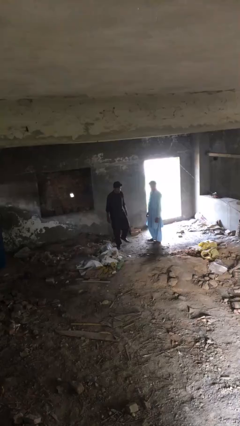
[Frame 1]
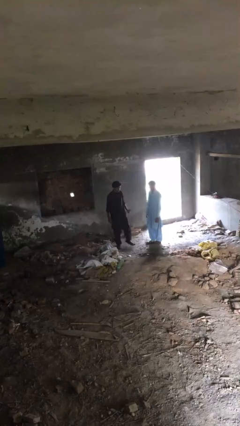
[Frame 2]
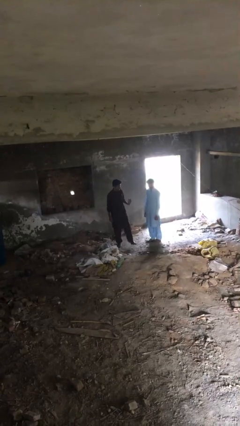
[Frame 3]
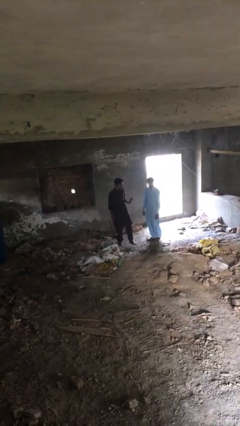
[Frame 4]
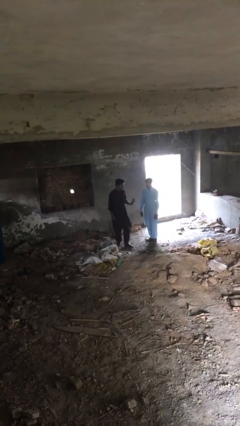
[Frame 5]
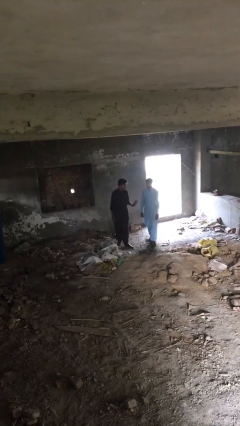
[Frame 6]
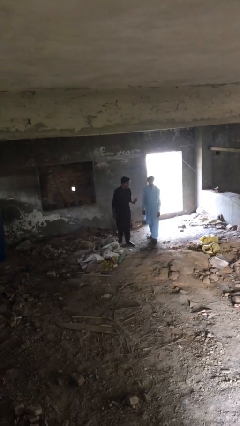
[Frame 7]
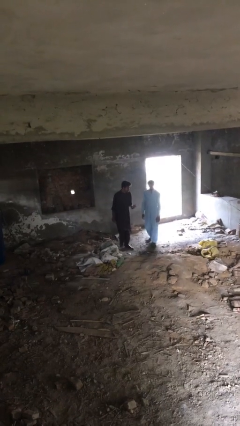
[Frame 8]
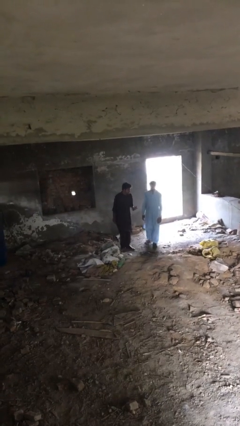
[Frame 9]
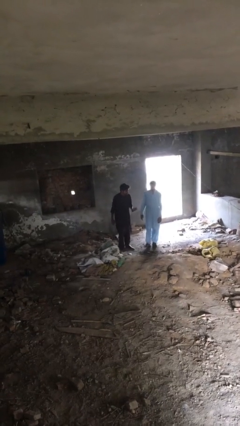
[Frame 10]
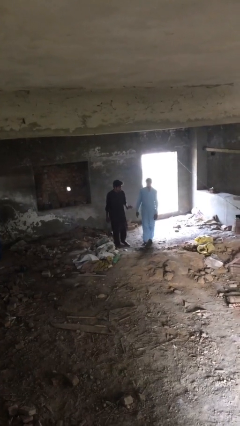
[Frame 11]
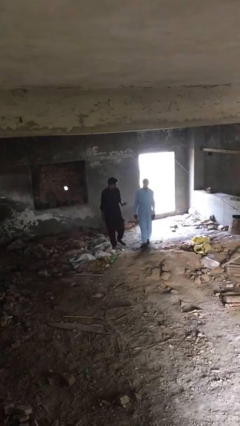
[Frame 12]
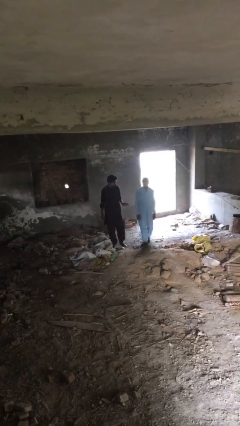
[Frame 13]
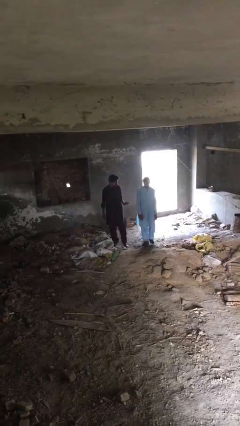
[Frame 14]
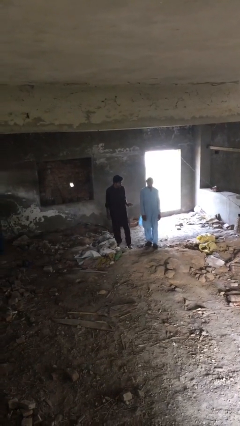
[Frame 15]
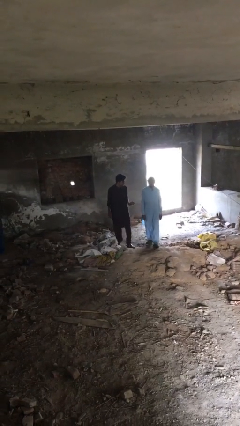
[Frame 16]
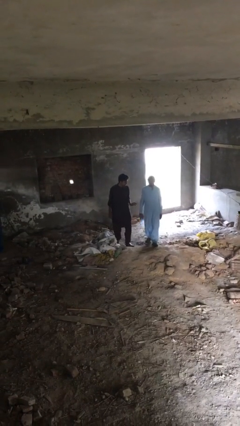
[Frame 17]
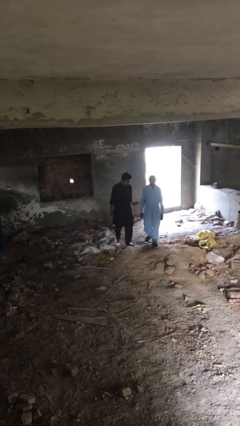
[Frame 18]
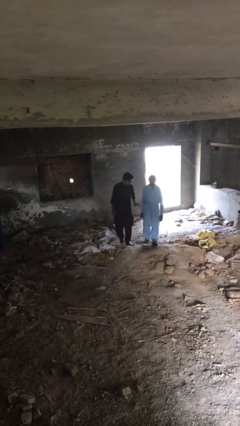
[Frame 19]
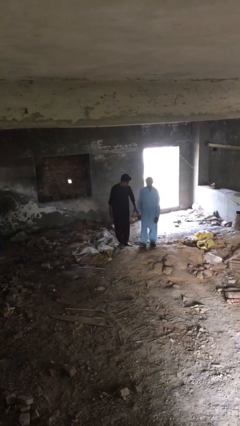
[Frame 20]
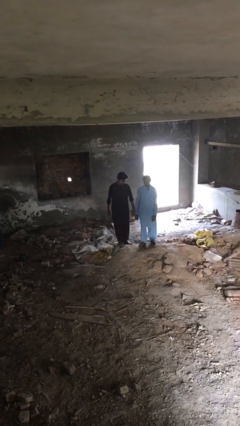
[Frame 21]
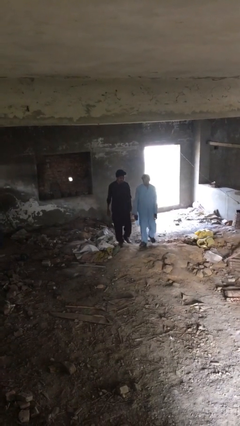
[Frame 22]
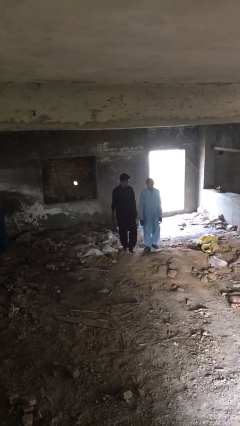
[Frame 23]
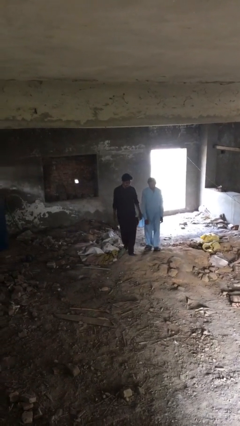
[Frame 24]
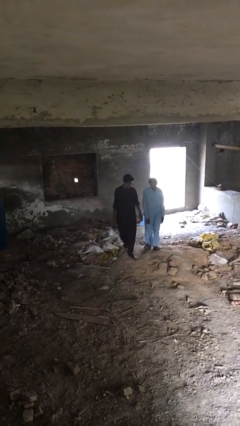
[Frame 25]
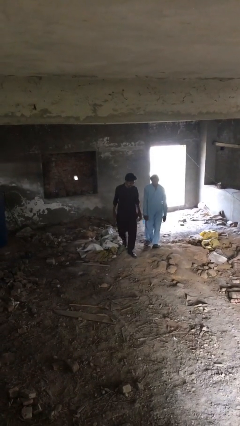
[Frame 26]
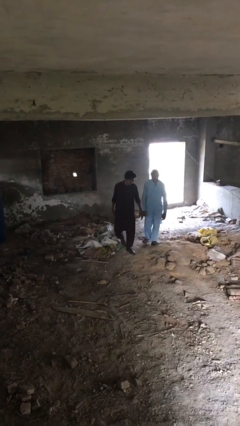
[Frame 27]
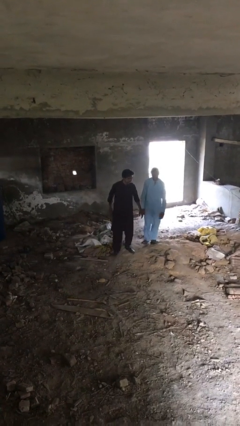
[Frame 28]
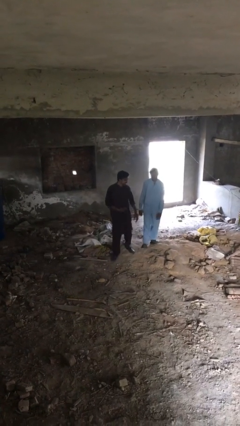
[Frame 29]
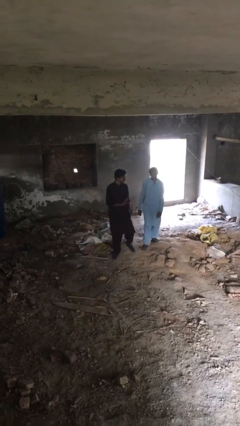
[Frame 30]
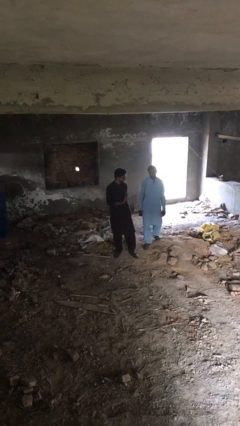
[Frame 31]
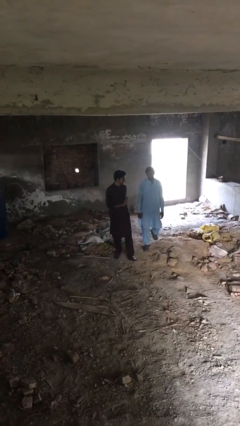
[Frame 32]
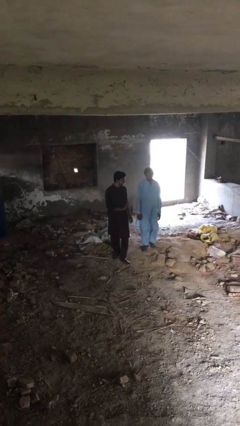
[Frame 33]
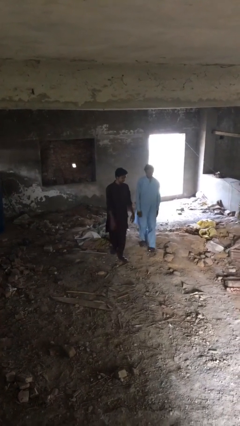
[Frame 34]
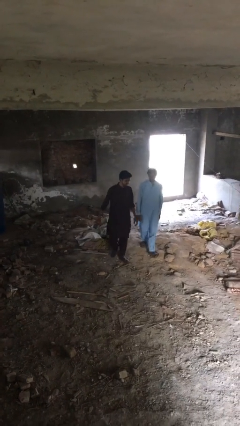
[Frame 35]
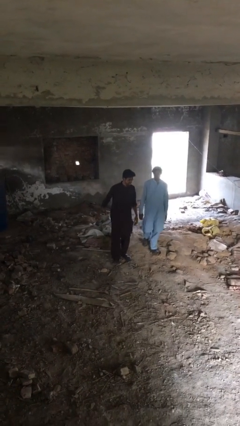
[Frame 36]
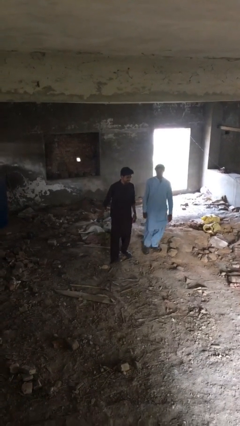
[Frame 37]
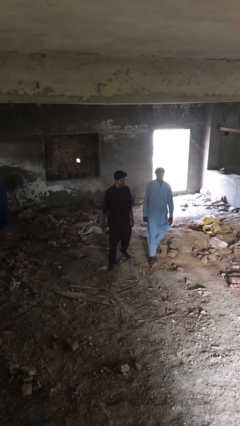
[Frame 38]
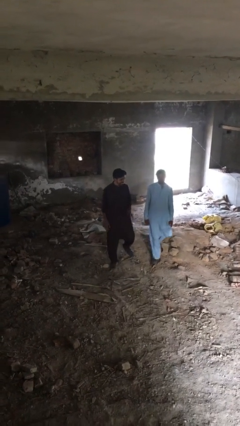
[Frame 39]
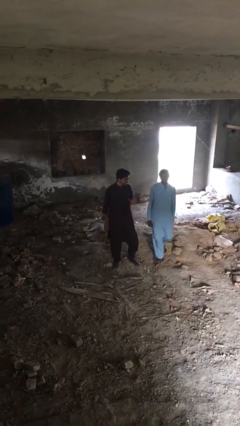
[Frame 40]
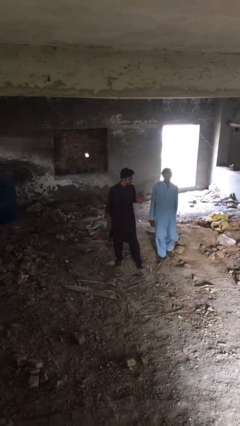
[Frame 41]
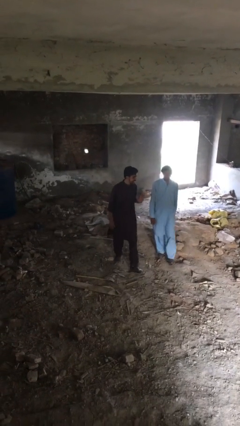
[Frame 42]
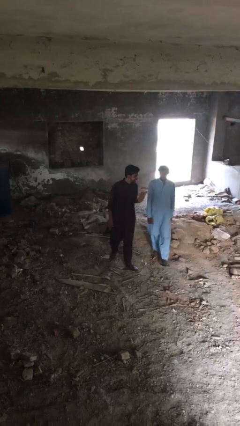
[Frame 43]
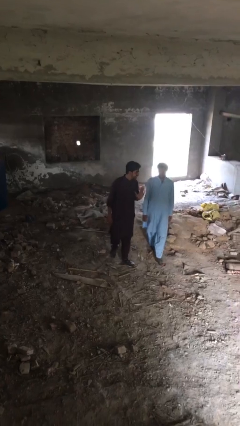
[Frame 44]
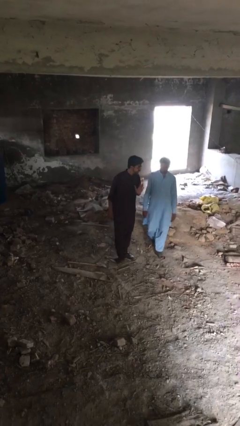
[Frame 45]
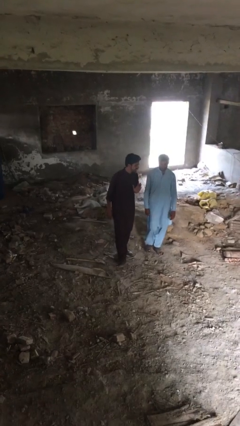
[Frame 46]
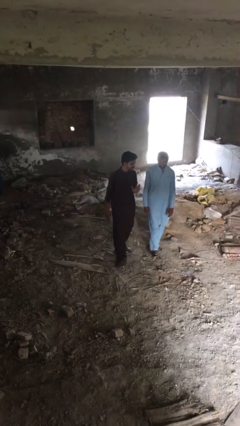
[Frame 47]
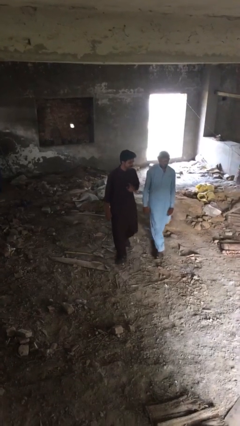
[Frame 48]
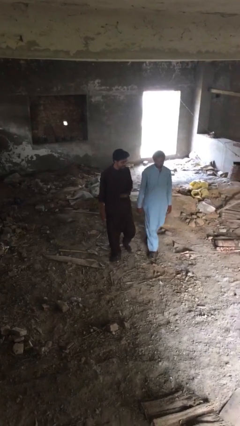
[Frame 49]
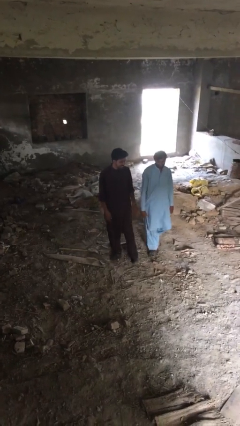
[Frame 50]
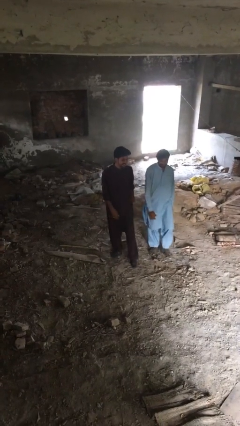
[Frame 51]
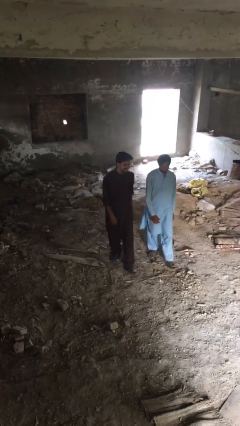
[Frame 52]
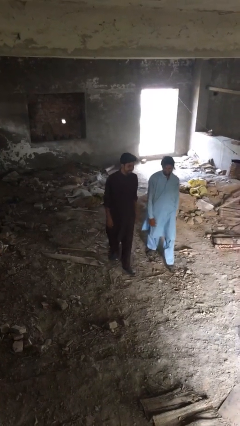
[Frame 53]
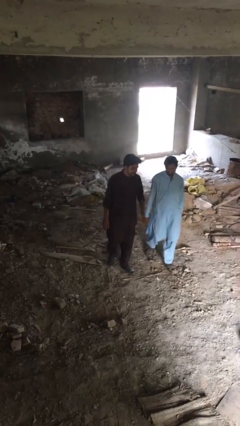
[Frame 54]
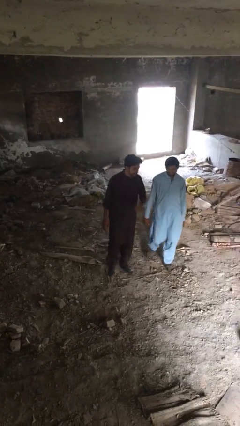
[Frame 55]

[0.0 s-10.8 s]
person talks to person

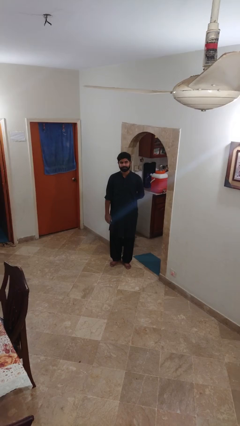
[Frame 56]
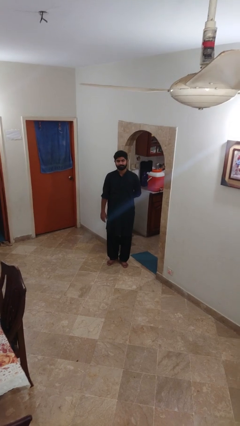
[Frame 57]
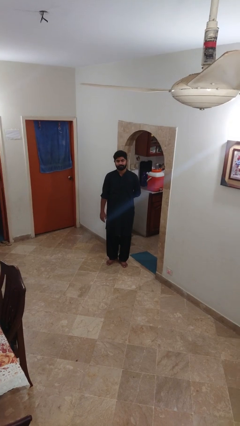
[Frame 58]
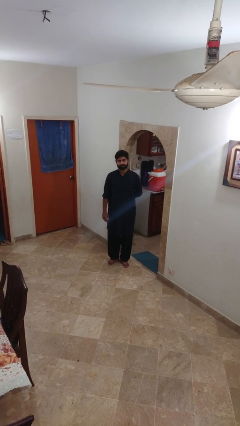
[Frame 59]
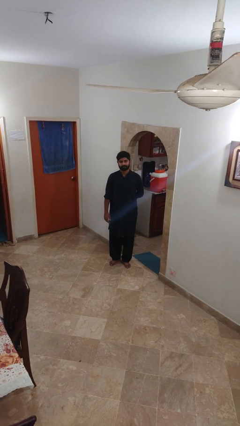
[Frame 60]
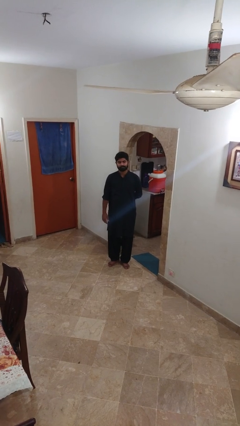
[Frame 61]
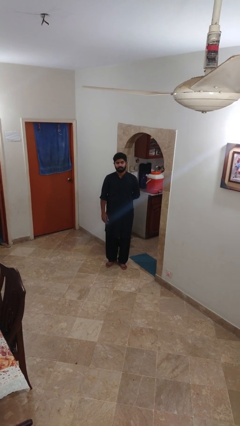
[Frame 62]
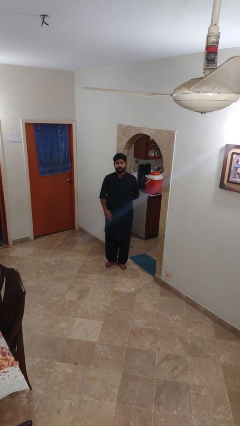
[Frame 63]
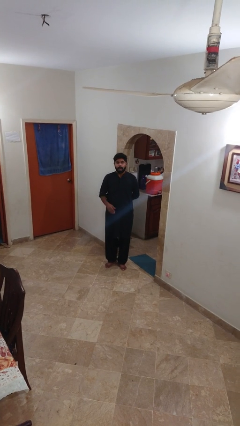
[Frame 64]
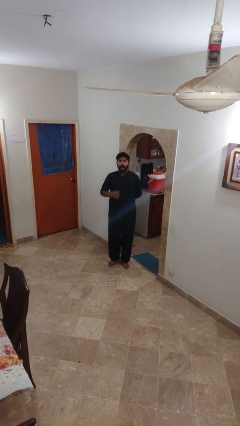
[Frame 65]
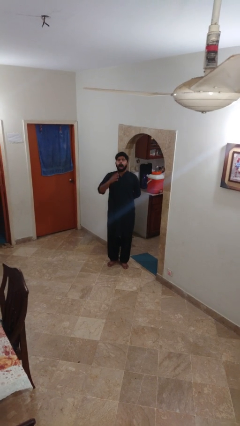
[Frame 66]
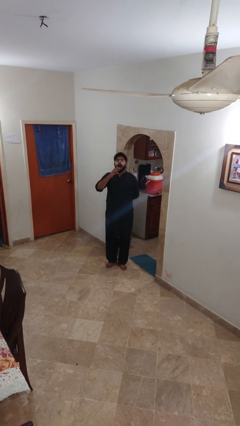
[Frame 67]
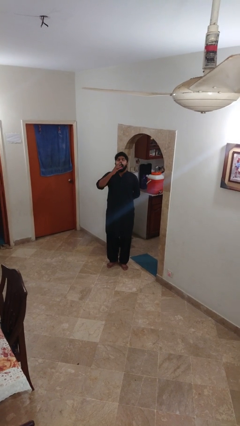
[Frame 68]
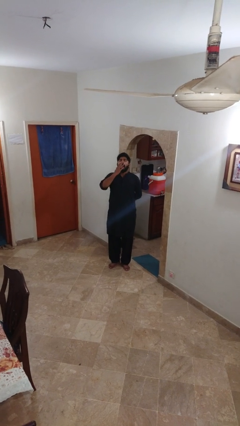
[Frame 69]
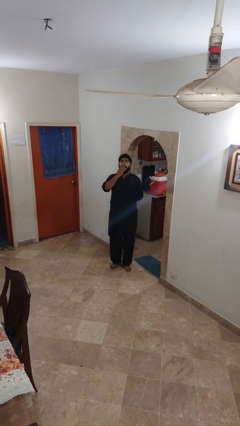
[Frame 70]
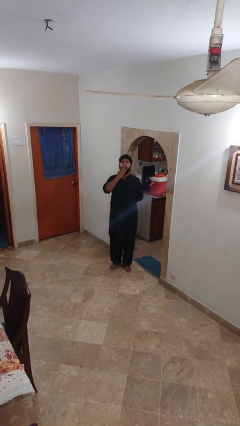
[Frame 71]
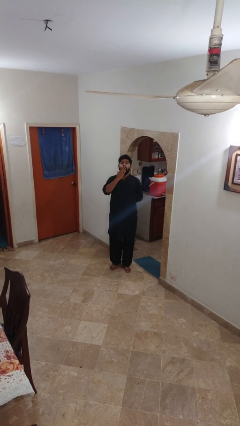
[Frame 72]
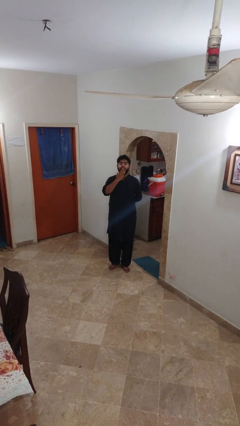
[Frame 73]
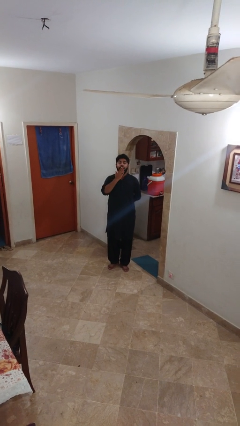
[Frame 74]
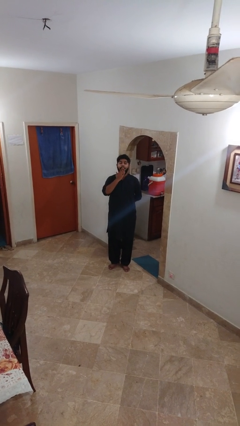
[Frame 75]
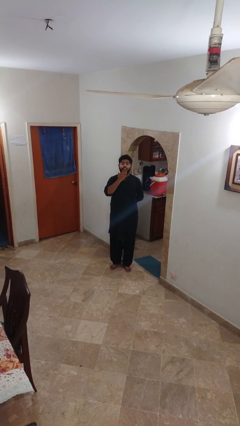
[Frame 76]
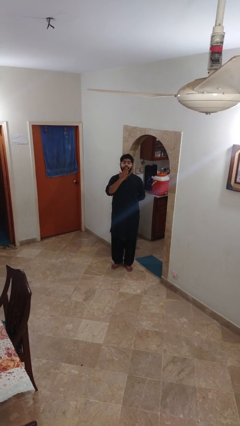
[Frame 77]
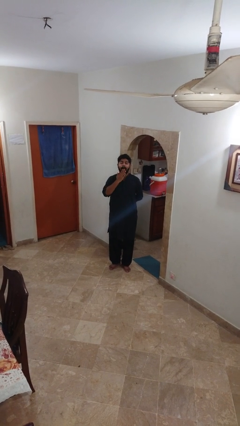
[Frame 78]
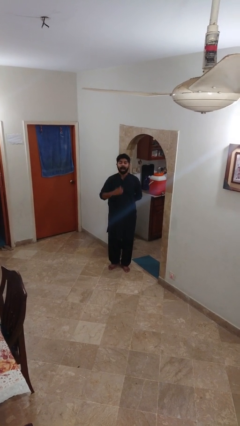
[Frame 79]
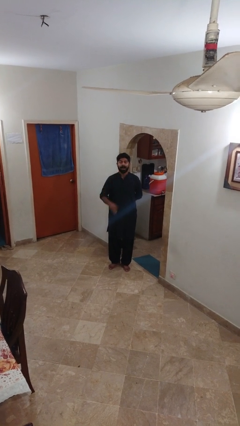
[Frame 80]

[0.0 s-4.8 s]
person yawns

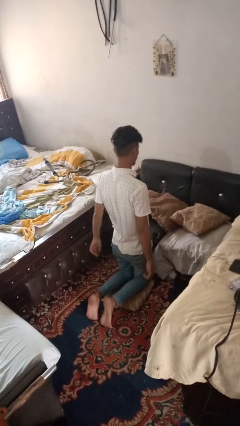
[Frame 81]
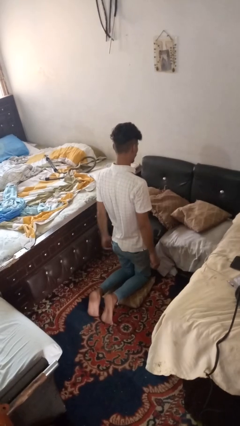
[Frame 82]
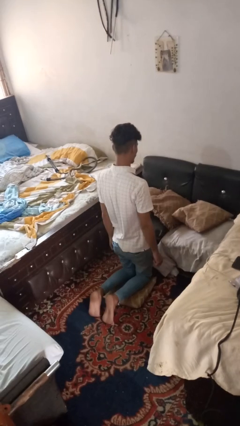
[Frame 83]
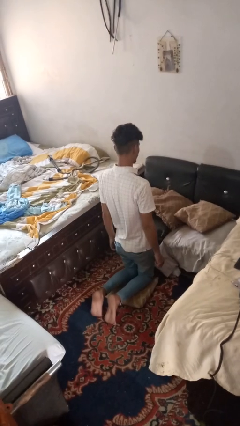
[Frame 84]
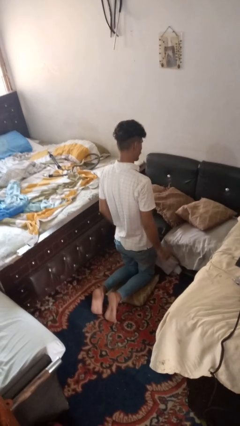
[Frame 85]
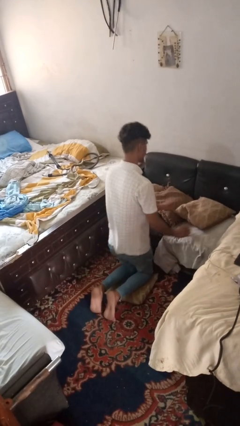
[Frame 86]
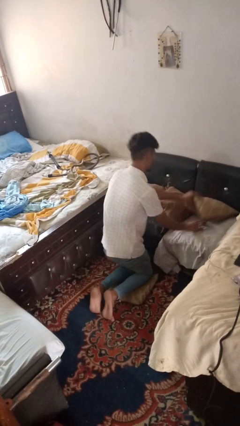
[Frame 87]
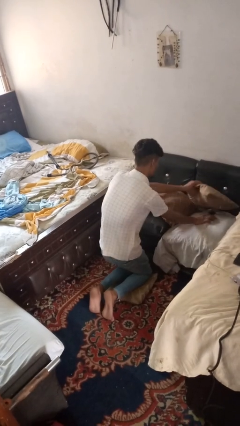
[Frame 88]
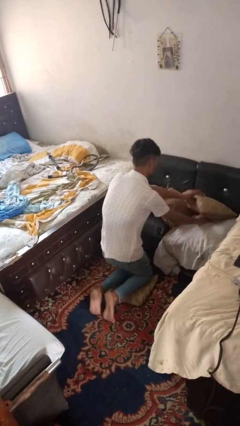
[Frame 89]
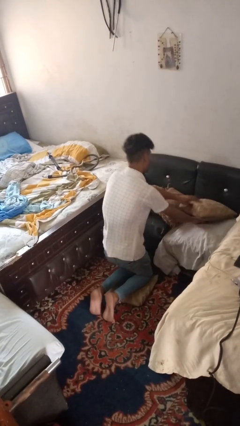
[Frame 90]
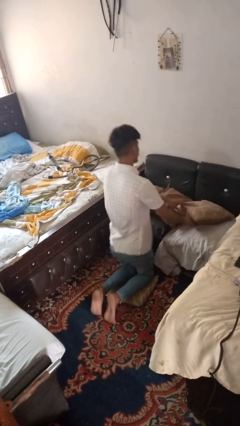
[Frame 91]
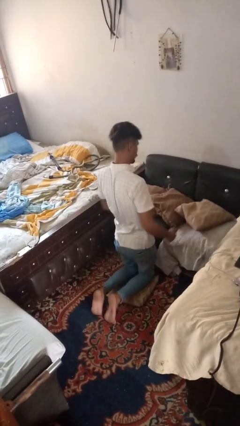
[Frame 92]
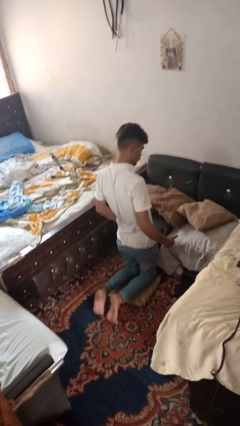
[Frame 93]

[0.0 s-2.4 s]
person searches in couch

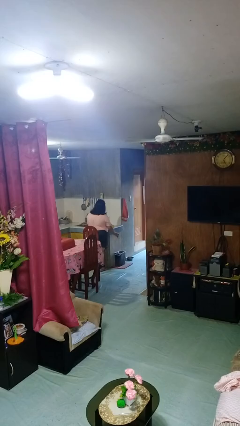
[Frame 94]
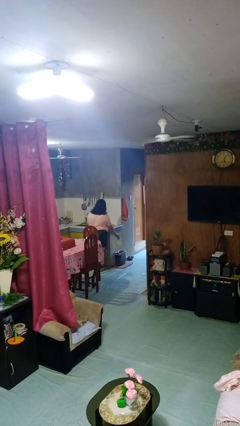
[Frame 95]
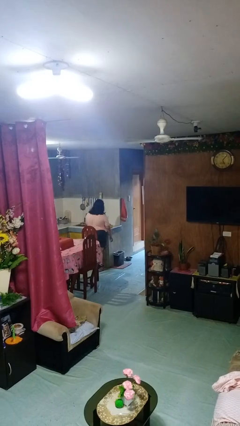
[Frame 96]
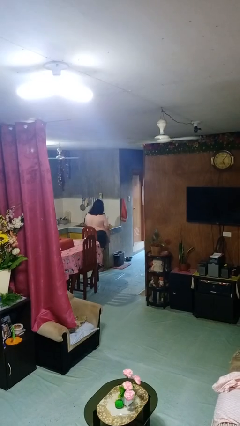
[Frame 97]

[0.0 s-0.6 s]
person discards trash
